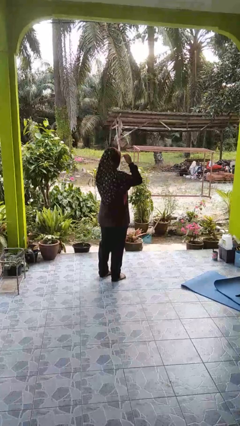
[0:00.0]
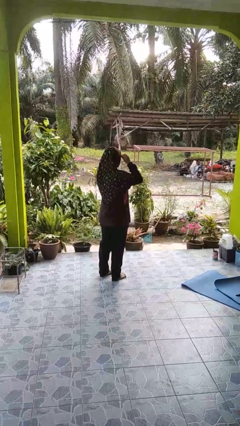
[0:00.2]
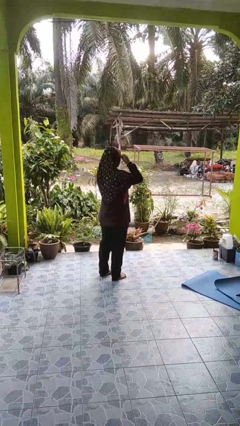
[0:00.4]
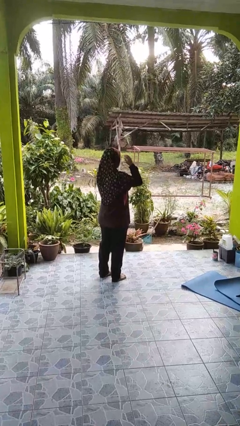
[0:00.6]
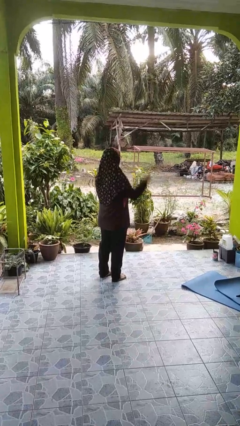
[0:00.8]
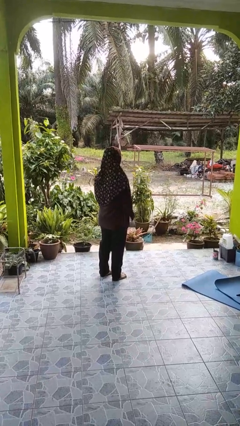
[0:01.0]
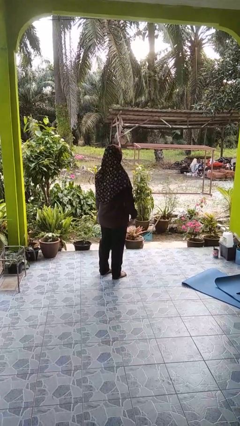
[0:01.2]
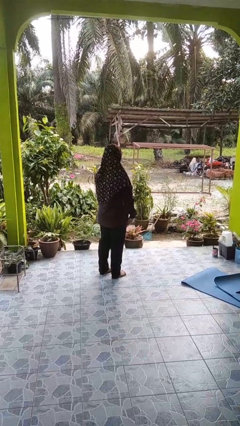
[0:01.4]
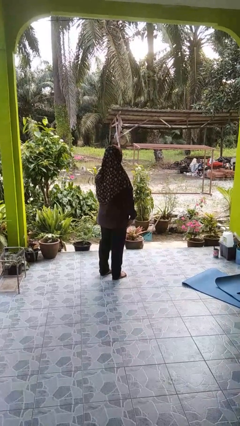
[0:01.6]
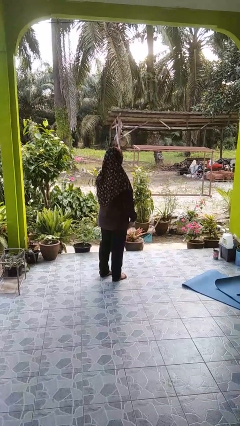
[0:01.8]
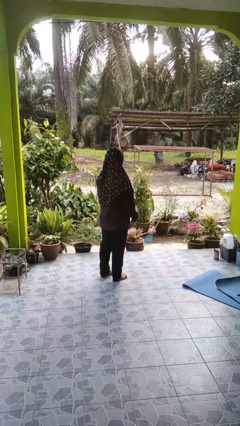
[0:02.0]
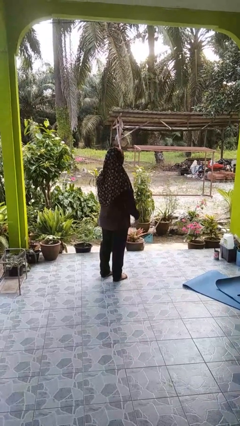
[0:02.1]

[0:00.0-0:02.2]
person puts on glasses

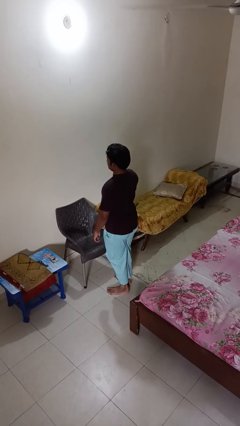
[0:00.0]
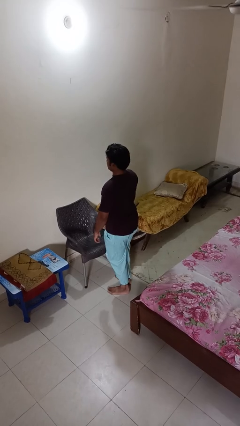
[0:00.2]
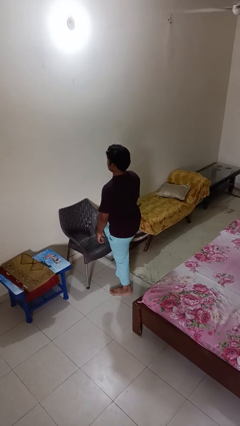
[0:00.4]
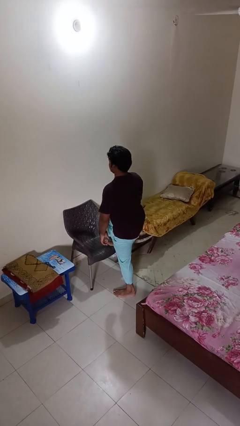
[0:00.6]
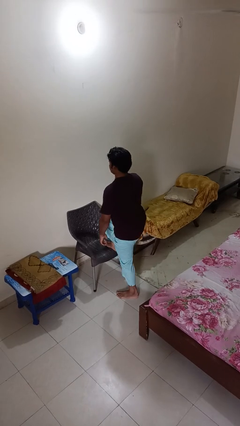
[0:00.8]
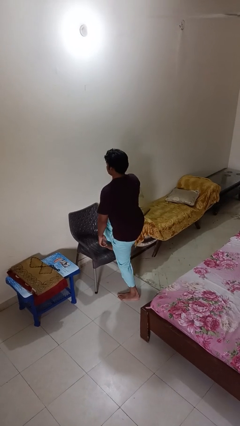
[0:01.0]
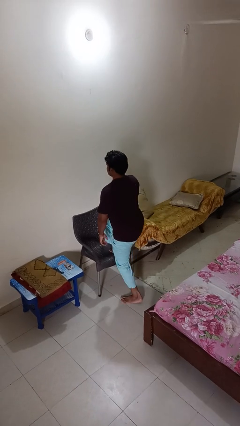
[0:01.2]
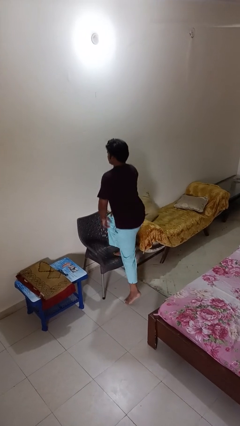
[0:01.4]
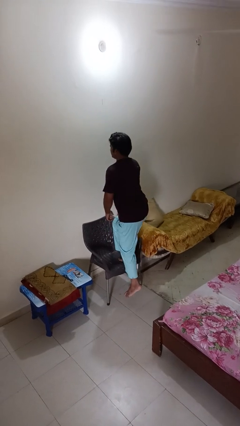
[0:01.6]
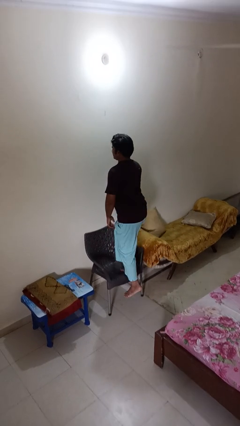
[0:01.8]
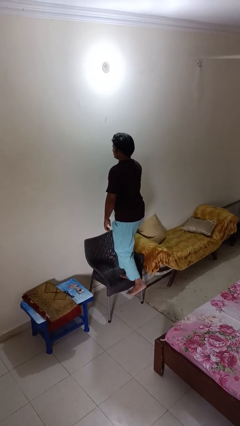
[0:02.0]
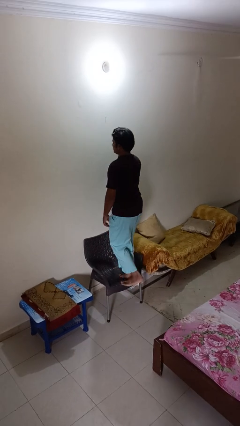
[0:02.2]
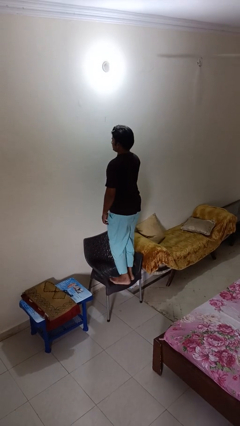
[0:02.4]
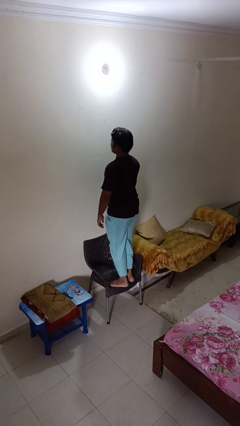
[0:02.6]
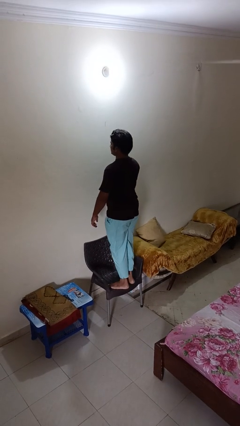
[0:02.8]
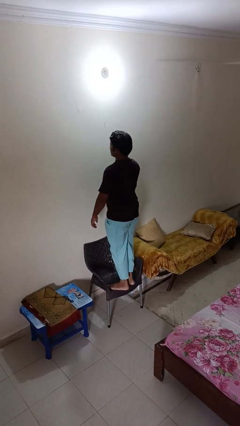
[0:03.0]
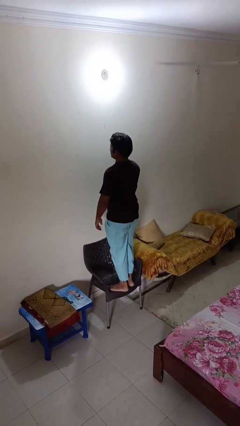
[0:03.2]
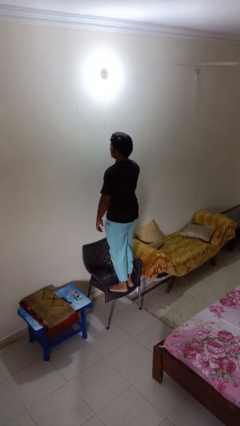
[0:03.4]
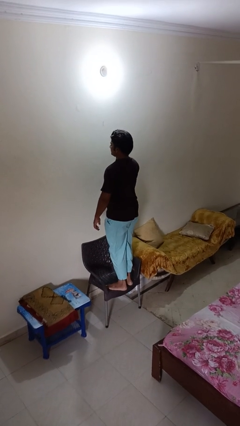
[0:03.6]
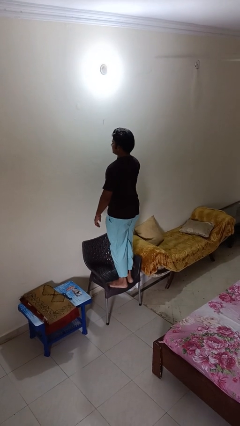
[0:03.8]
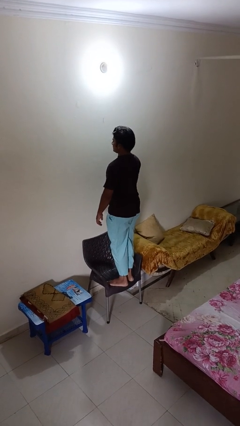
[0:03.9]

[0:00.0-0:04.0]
person climbs on chair

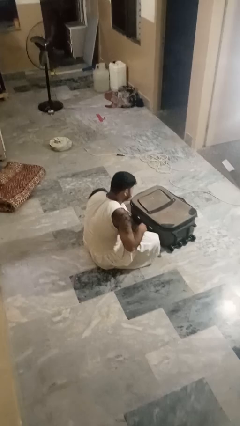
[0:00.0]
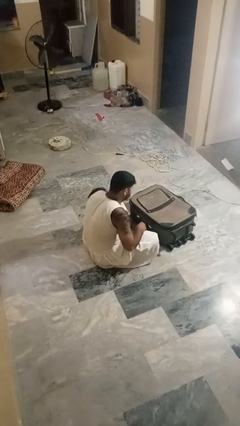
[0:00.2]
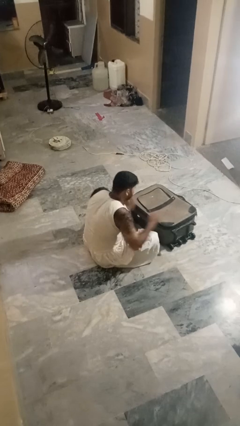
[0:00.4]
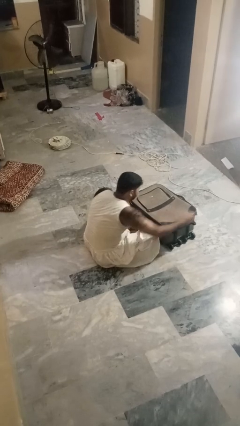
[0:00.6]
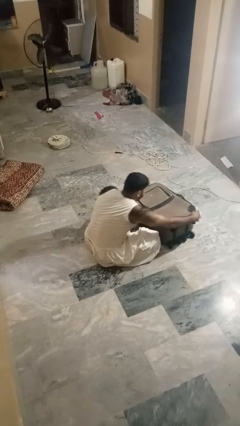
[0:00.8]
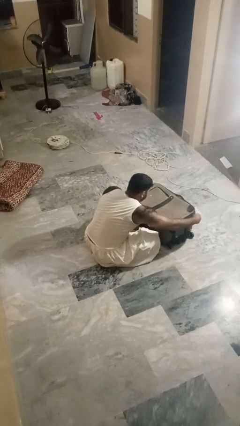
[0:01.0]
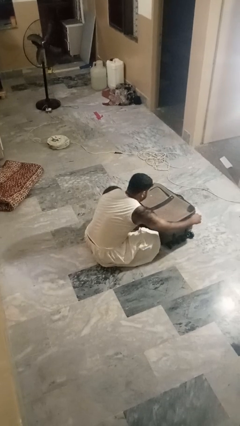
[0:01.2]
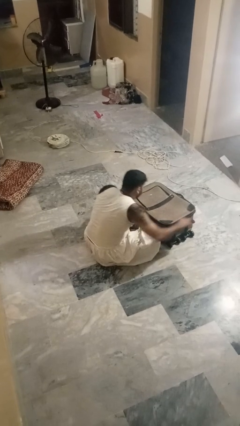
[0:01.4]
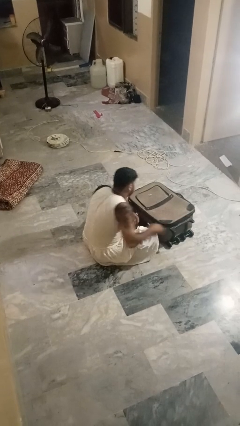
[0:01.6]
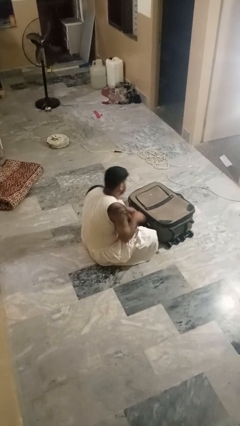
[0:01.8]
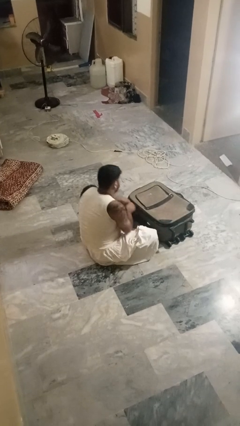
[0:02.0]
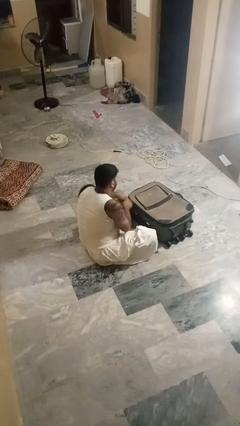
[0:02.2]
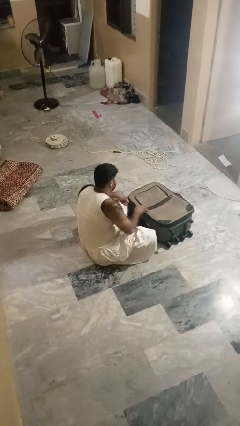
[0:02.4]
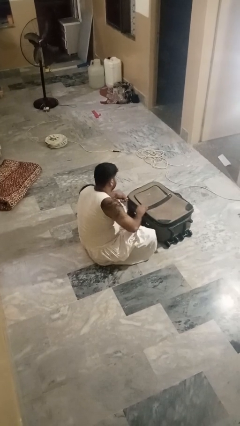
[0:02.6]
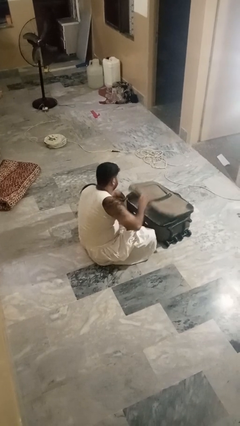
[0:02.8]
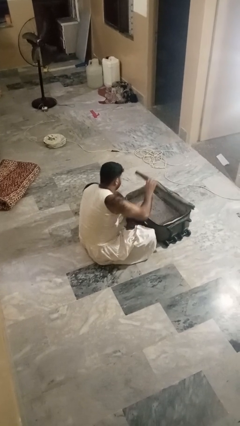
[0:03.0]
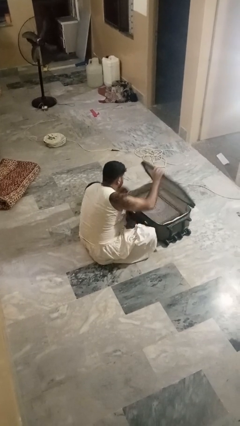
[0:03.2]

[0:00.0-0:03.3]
person opens suitcase

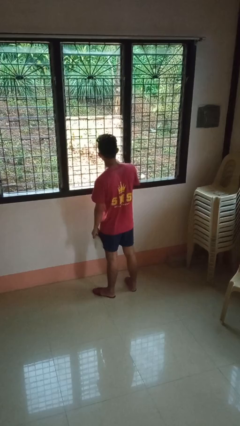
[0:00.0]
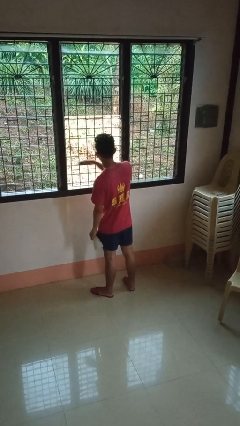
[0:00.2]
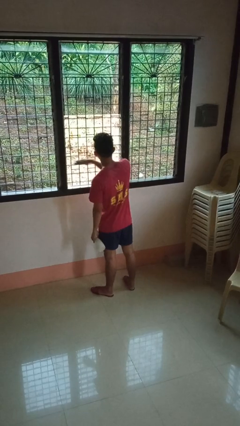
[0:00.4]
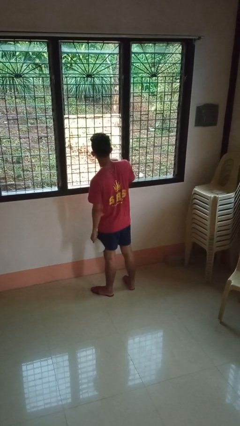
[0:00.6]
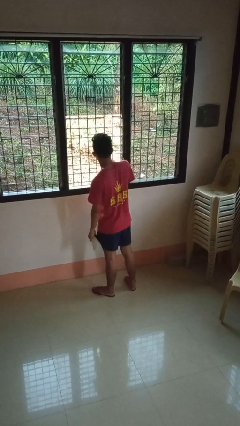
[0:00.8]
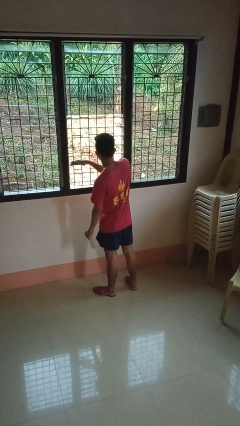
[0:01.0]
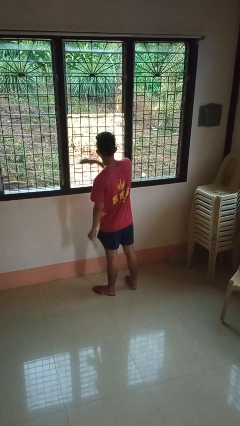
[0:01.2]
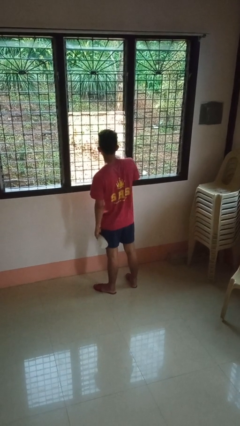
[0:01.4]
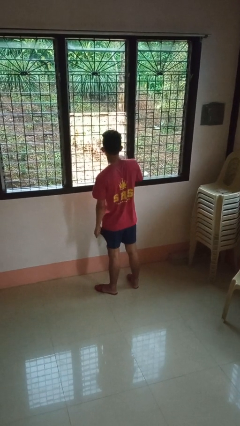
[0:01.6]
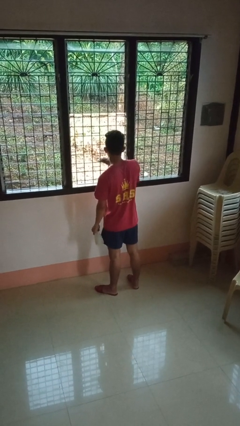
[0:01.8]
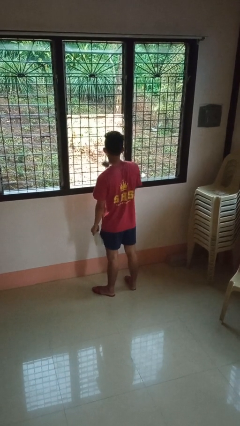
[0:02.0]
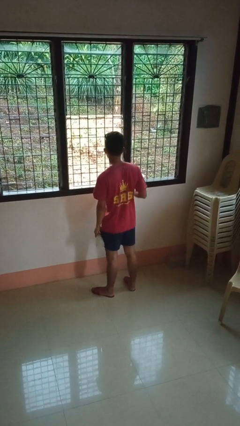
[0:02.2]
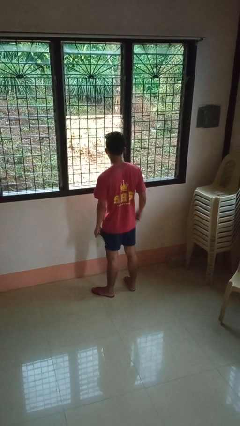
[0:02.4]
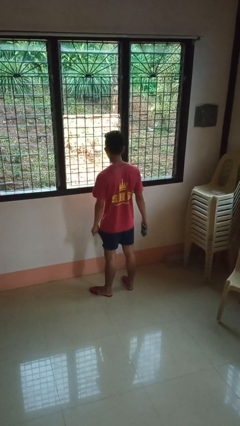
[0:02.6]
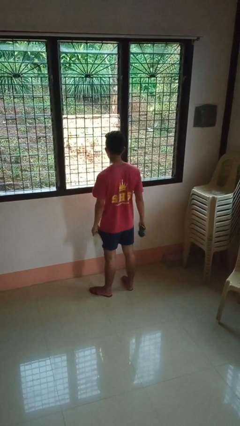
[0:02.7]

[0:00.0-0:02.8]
person washes window

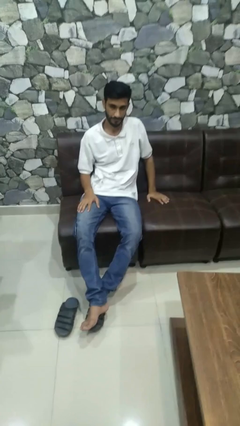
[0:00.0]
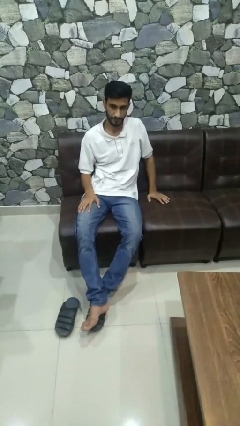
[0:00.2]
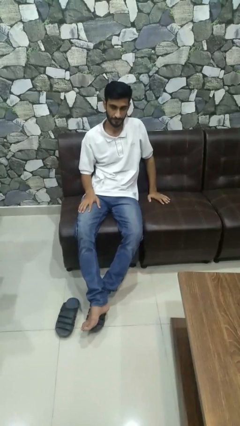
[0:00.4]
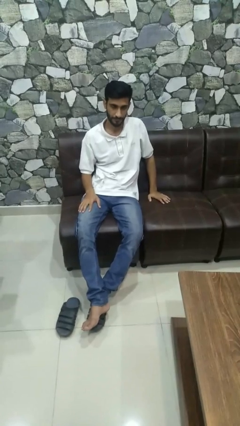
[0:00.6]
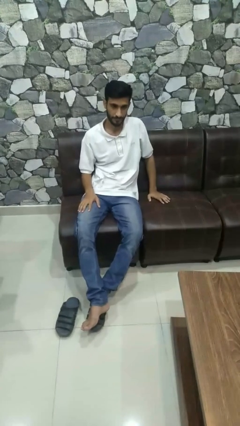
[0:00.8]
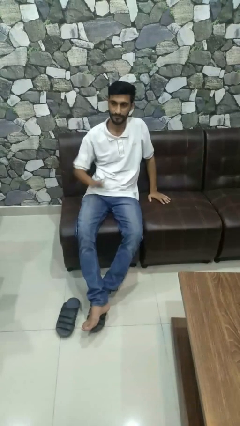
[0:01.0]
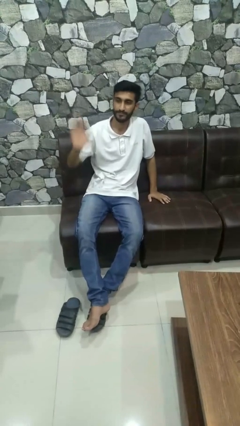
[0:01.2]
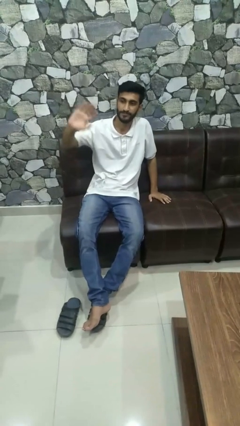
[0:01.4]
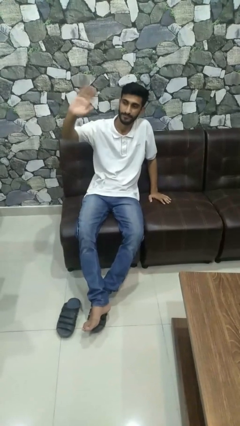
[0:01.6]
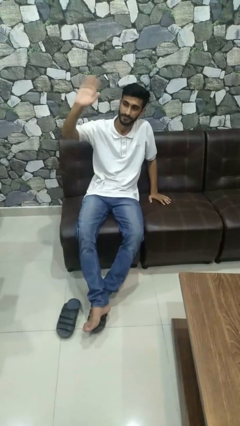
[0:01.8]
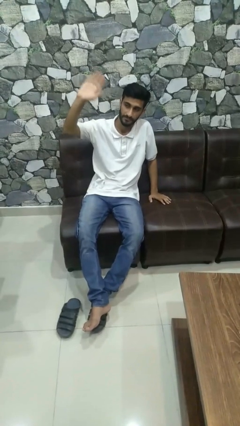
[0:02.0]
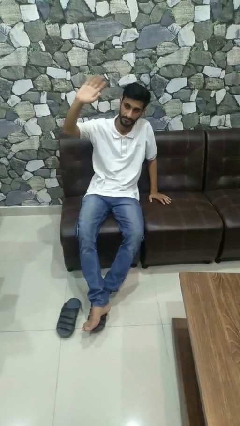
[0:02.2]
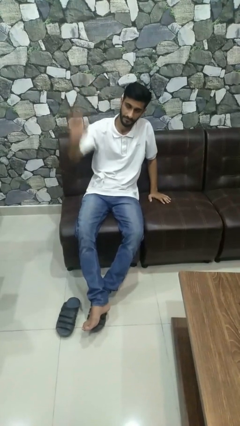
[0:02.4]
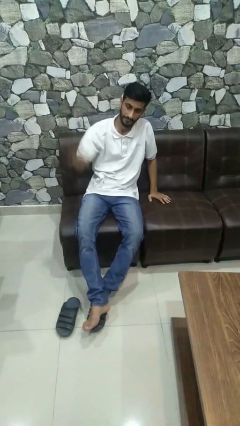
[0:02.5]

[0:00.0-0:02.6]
person waves at person

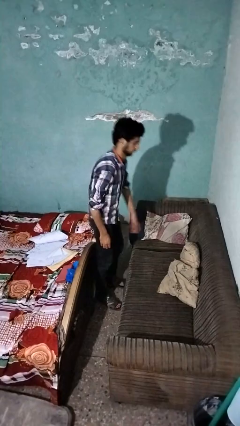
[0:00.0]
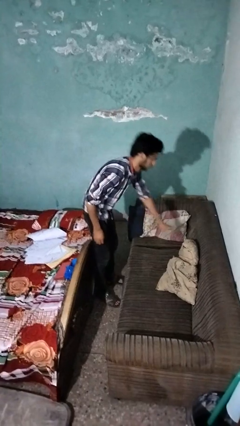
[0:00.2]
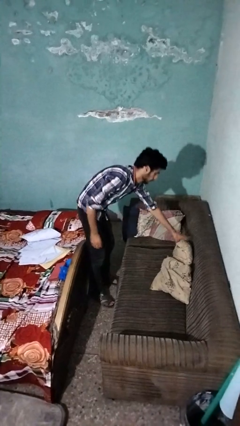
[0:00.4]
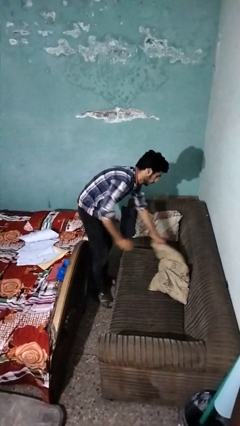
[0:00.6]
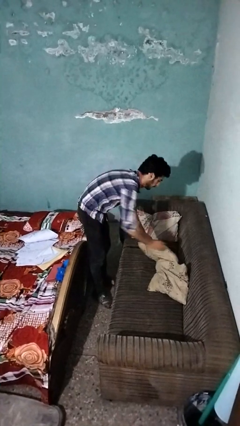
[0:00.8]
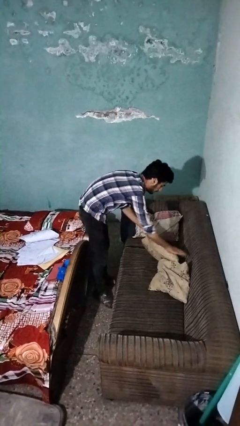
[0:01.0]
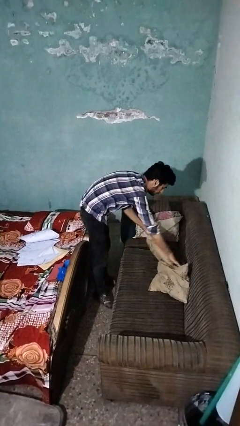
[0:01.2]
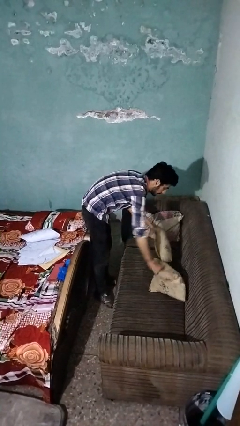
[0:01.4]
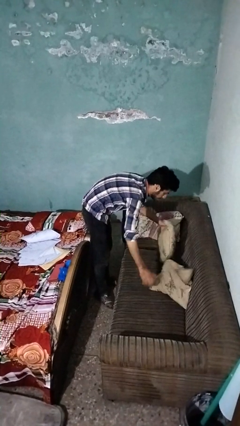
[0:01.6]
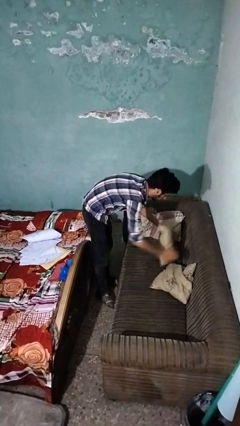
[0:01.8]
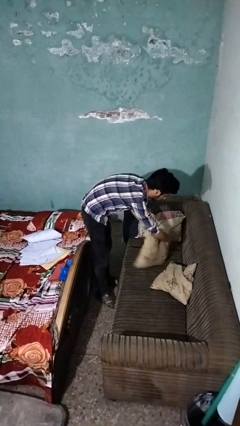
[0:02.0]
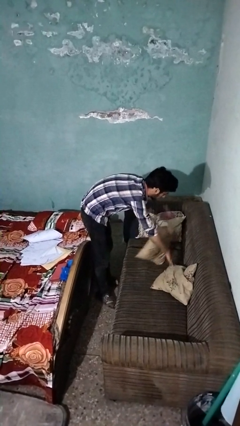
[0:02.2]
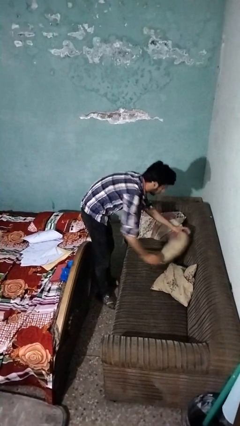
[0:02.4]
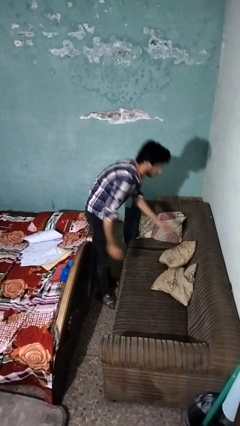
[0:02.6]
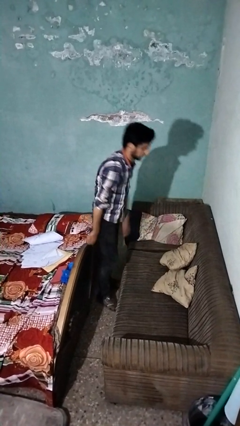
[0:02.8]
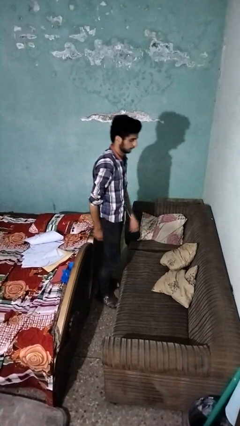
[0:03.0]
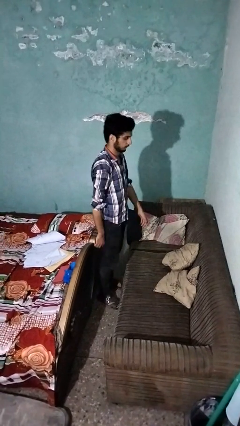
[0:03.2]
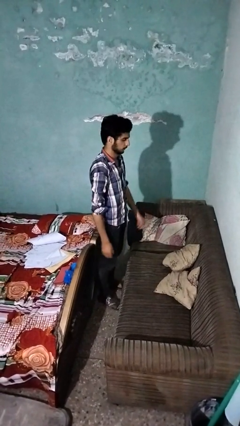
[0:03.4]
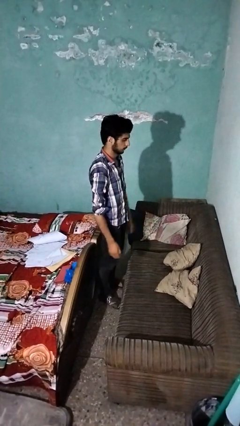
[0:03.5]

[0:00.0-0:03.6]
person searches in couch
